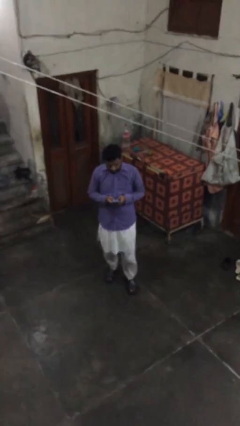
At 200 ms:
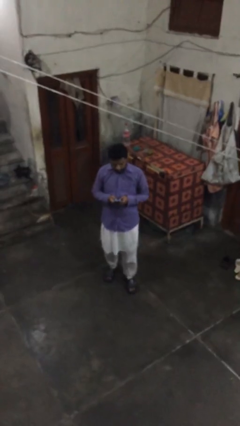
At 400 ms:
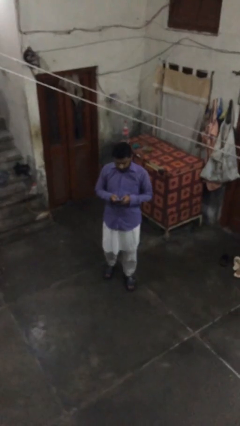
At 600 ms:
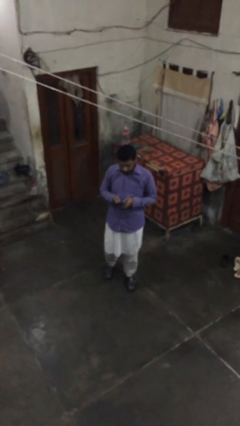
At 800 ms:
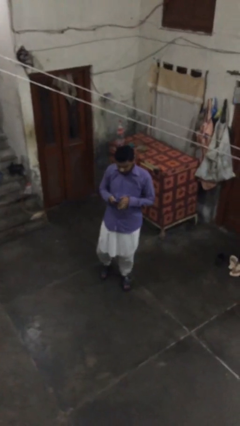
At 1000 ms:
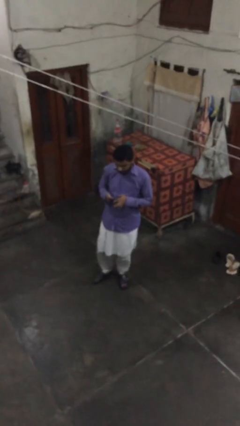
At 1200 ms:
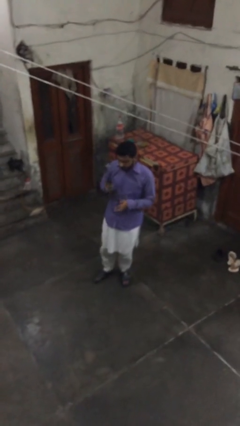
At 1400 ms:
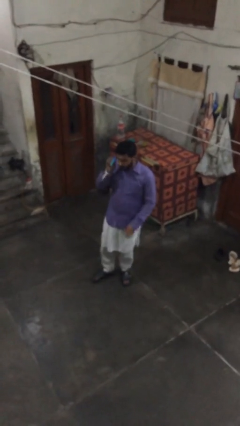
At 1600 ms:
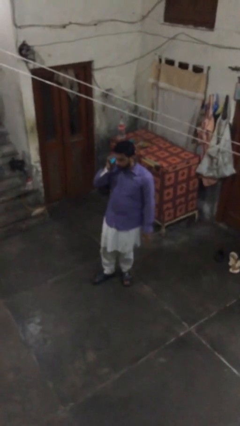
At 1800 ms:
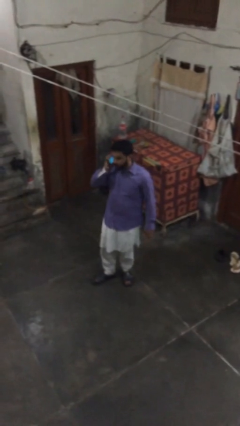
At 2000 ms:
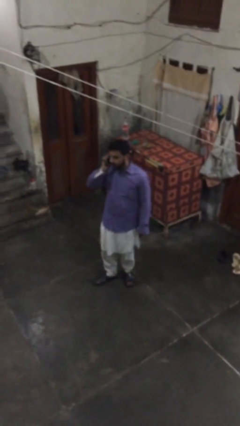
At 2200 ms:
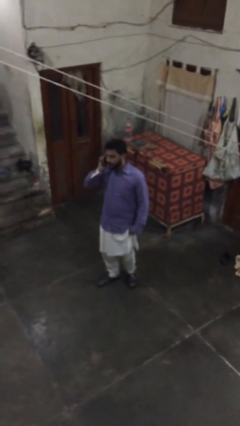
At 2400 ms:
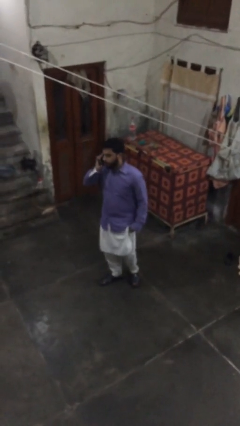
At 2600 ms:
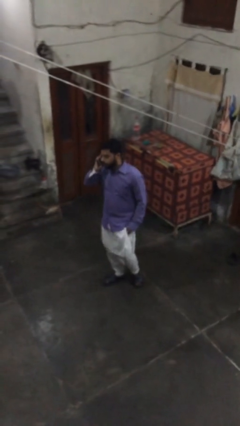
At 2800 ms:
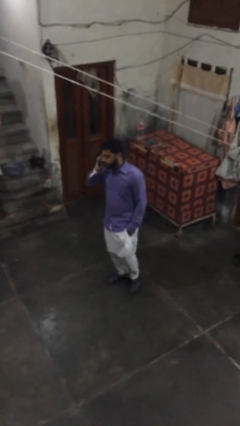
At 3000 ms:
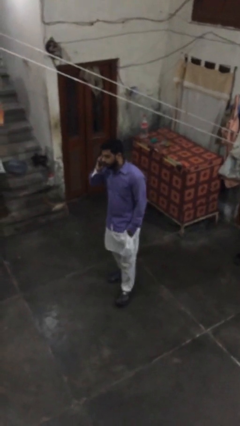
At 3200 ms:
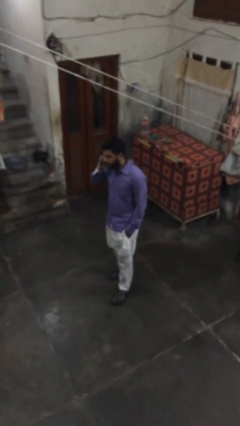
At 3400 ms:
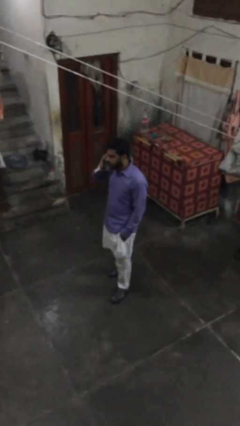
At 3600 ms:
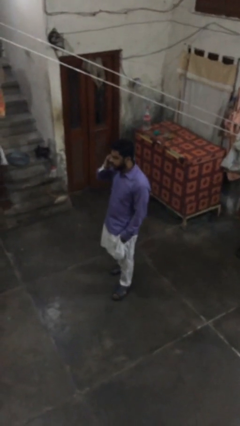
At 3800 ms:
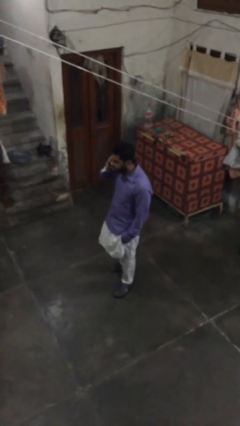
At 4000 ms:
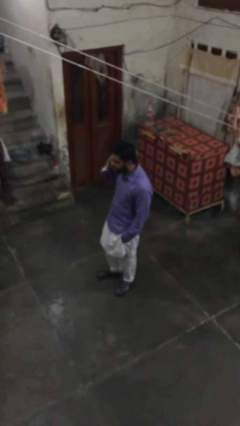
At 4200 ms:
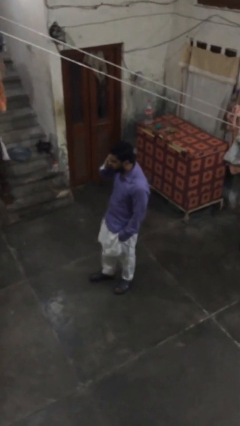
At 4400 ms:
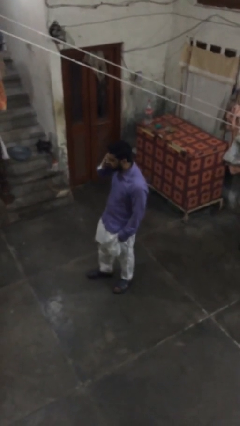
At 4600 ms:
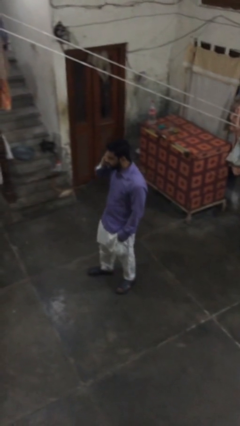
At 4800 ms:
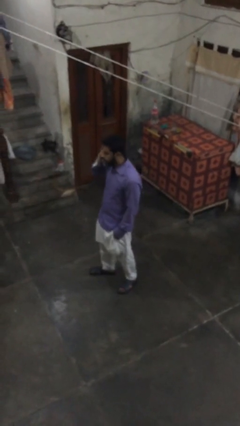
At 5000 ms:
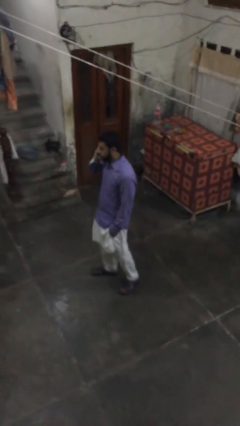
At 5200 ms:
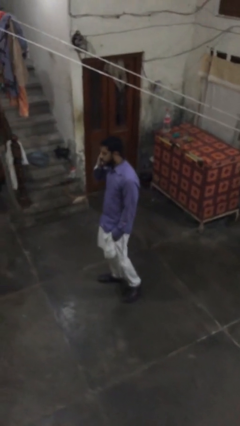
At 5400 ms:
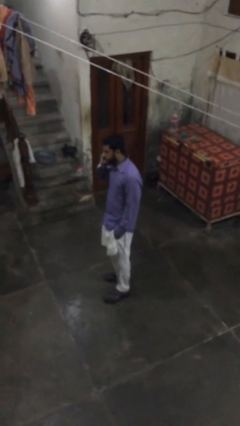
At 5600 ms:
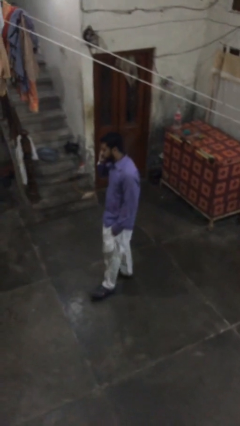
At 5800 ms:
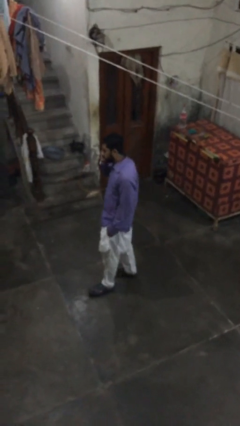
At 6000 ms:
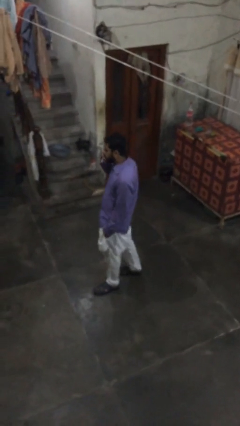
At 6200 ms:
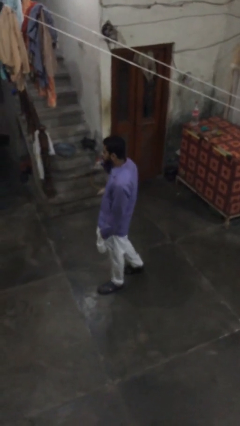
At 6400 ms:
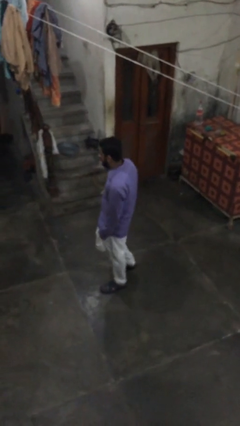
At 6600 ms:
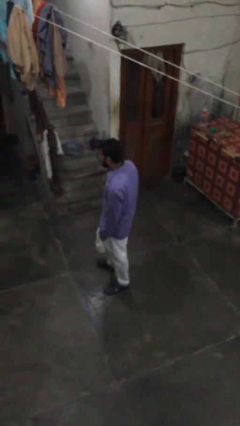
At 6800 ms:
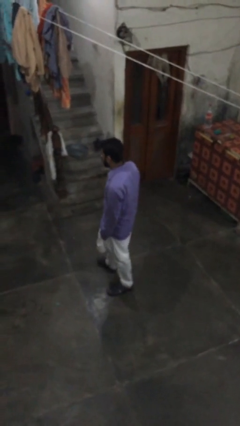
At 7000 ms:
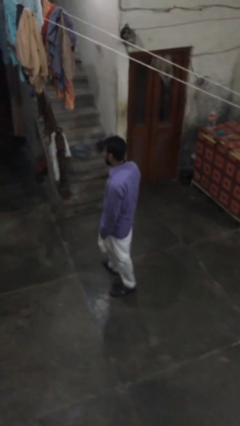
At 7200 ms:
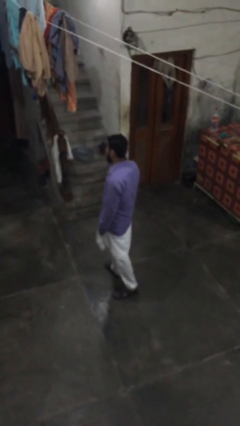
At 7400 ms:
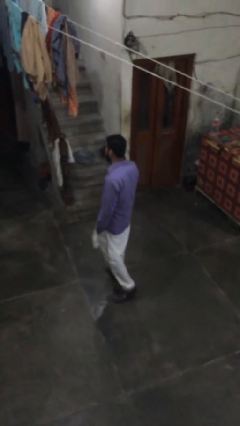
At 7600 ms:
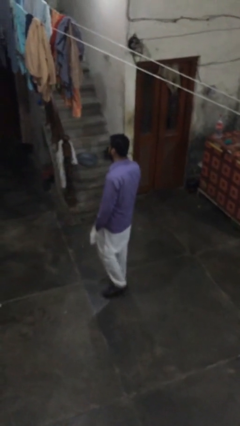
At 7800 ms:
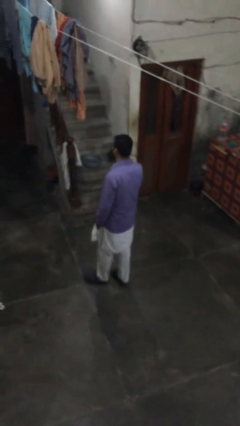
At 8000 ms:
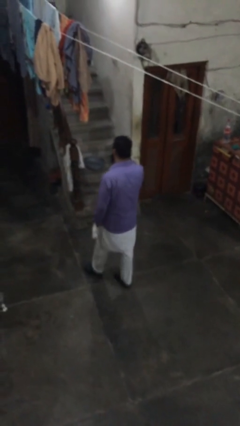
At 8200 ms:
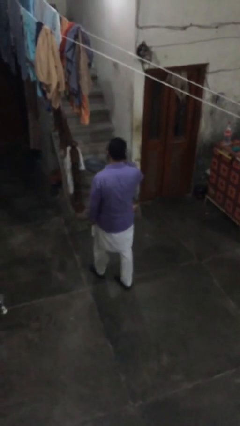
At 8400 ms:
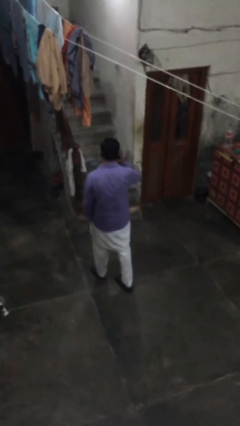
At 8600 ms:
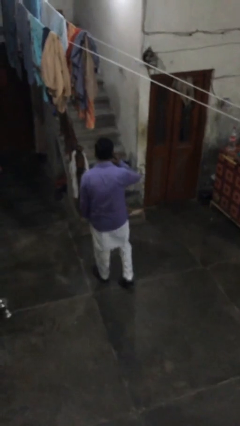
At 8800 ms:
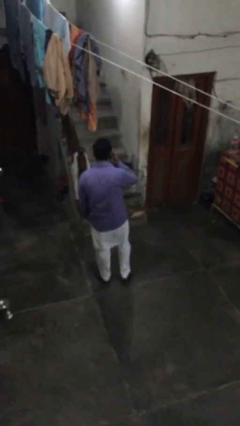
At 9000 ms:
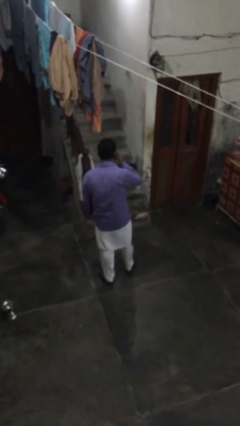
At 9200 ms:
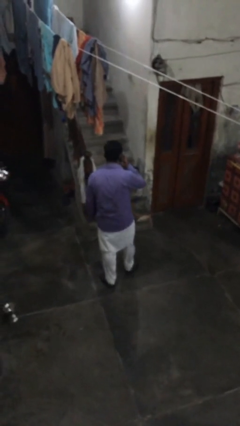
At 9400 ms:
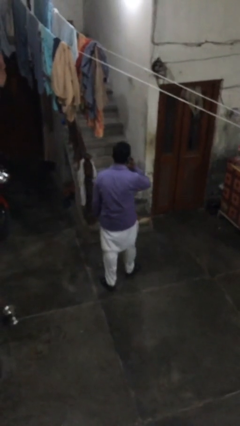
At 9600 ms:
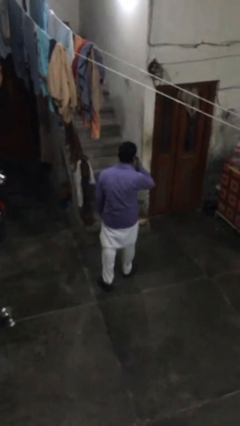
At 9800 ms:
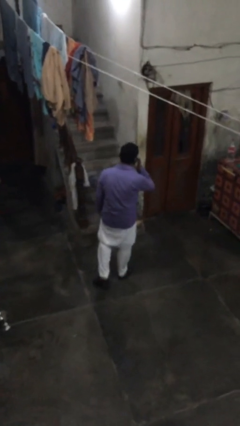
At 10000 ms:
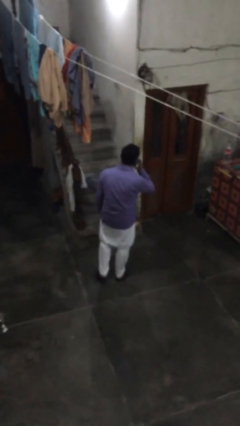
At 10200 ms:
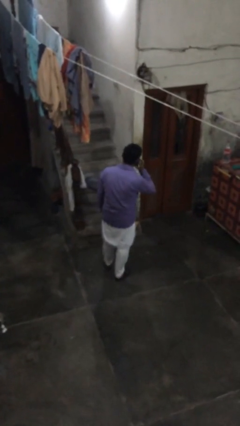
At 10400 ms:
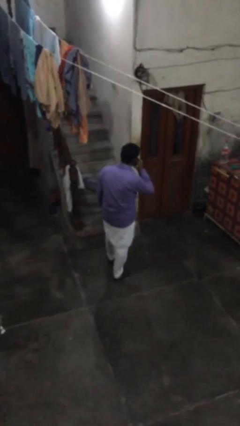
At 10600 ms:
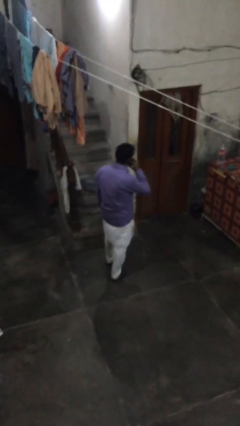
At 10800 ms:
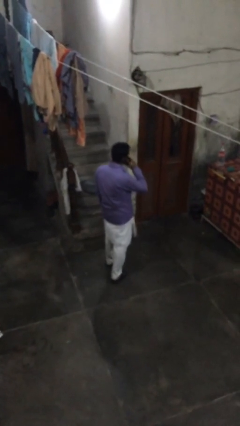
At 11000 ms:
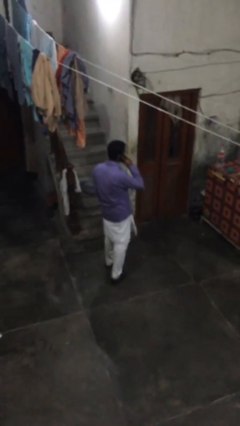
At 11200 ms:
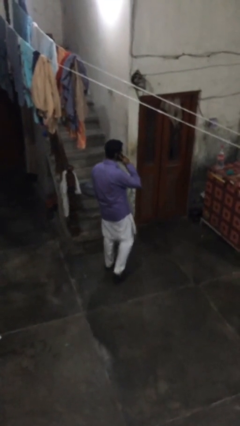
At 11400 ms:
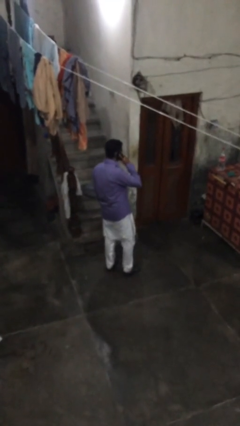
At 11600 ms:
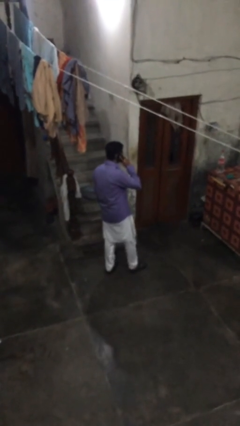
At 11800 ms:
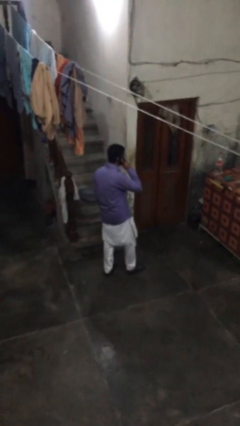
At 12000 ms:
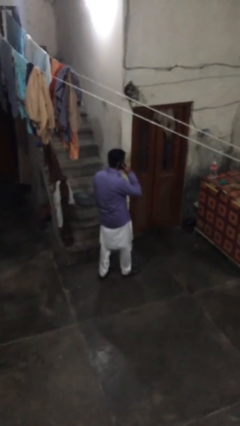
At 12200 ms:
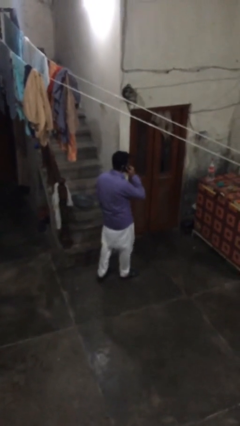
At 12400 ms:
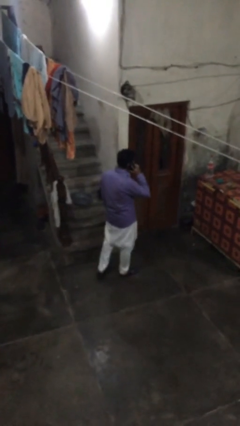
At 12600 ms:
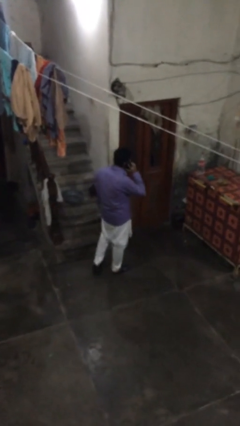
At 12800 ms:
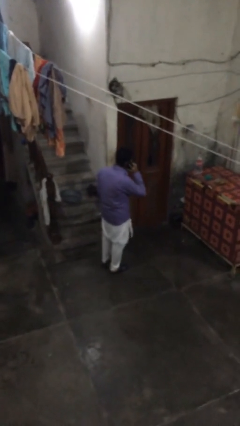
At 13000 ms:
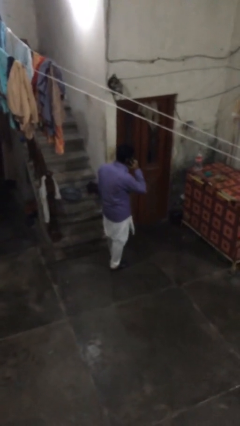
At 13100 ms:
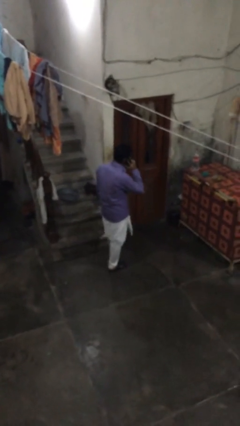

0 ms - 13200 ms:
person talks on phone

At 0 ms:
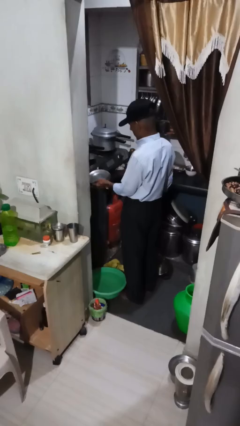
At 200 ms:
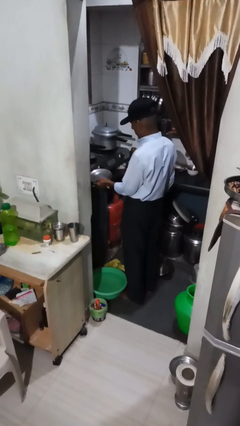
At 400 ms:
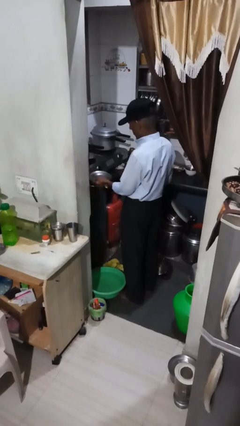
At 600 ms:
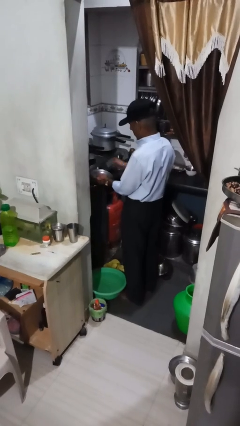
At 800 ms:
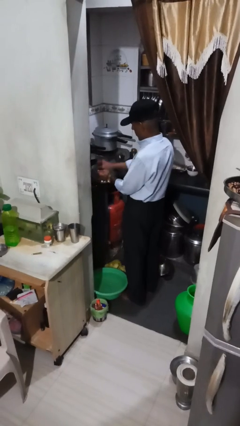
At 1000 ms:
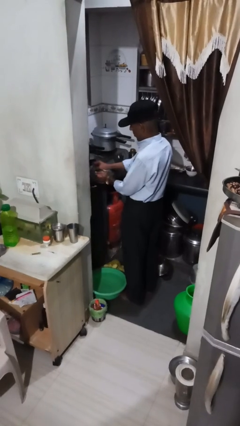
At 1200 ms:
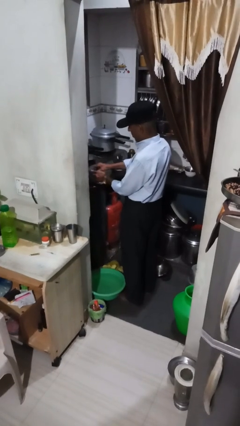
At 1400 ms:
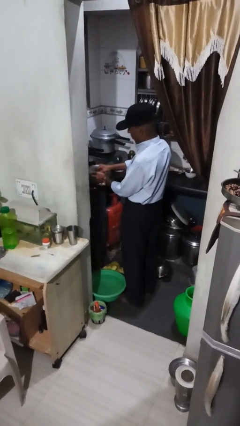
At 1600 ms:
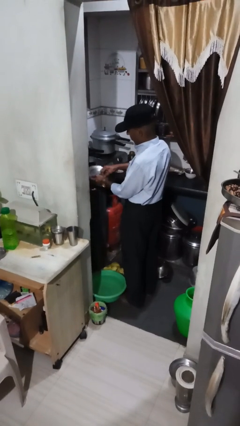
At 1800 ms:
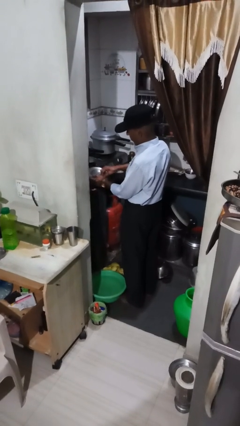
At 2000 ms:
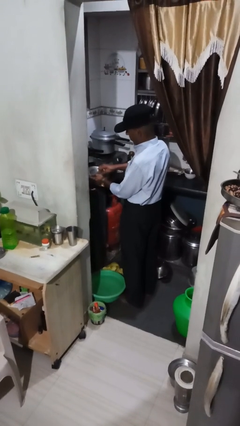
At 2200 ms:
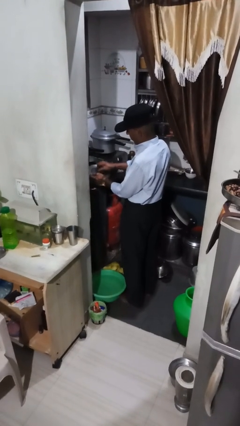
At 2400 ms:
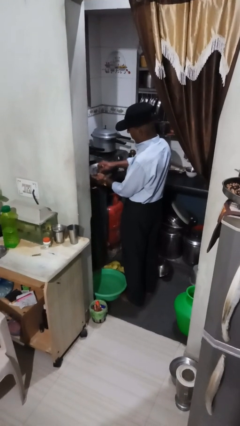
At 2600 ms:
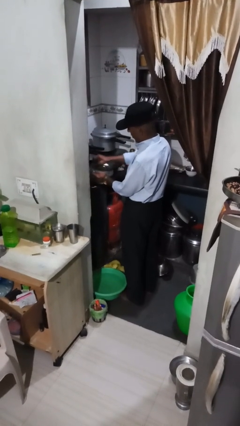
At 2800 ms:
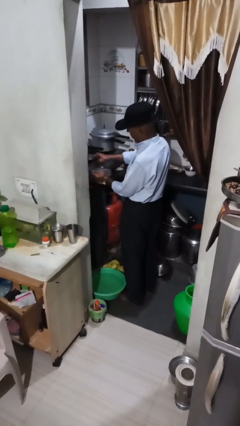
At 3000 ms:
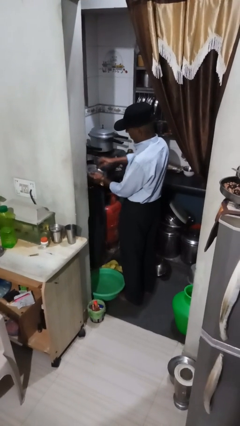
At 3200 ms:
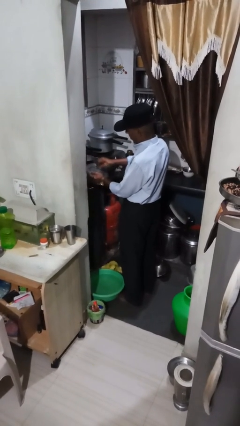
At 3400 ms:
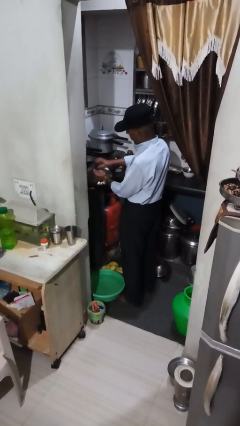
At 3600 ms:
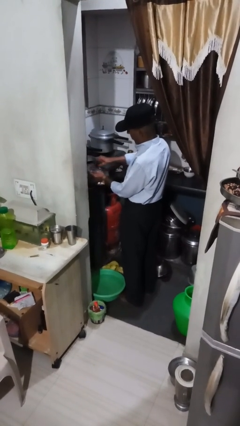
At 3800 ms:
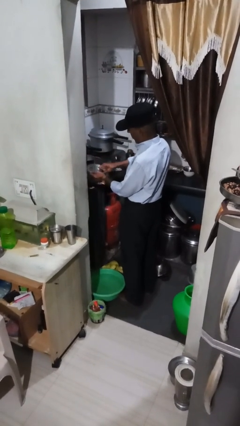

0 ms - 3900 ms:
person washes dish

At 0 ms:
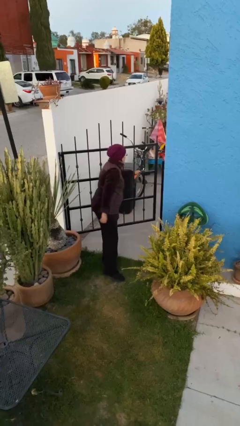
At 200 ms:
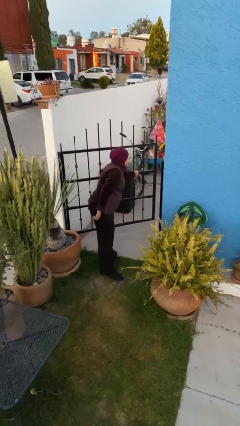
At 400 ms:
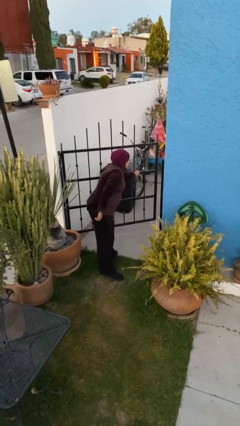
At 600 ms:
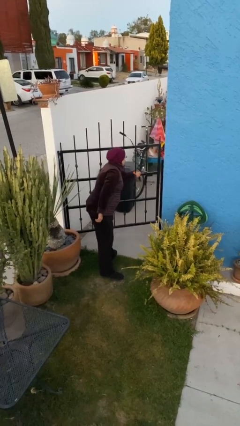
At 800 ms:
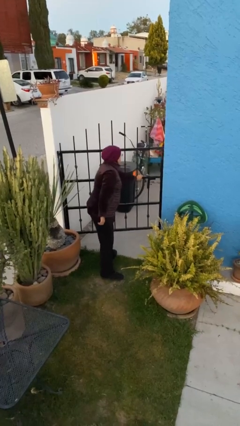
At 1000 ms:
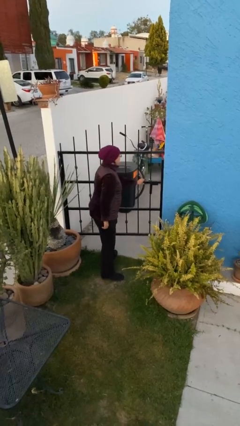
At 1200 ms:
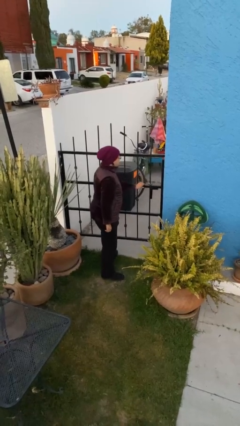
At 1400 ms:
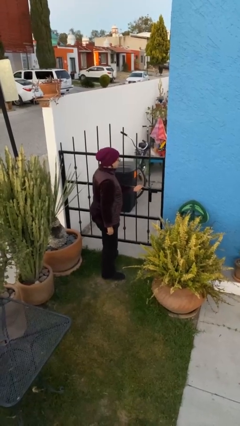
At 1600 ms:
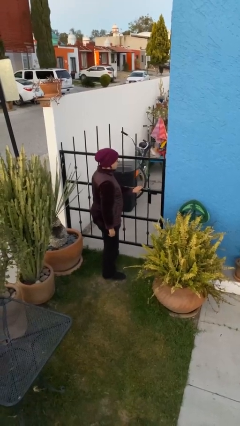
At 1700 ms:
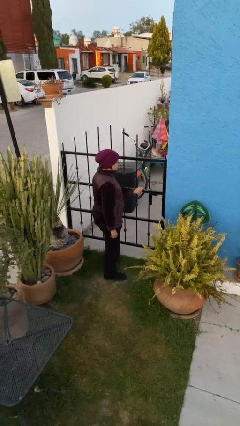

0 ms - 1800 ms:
person closes facility door
